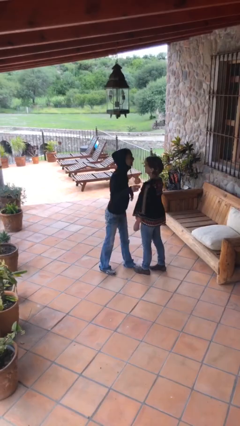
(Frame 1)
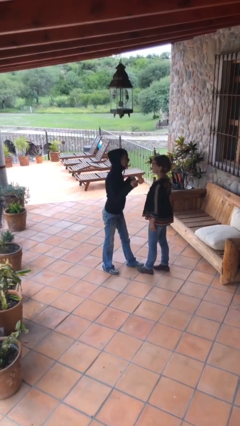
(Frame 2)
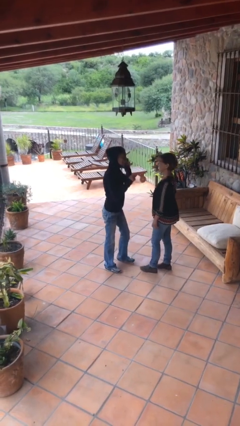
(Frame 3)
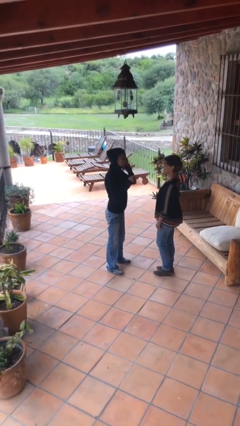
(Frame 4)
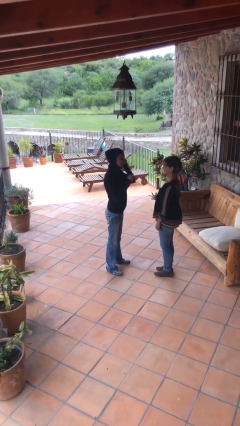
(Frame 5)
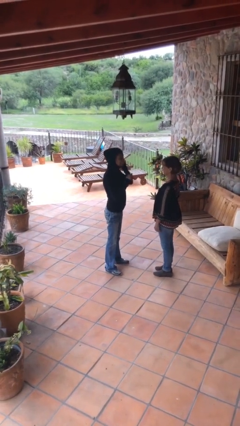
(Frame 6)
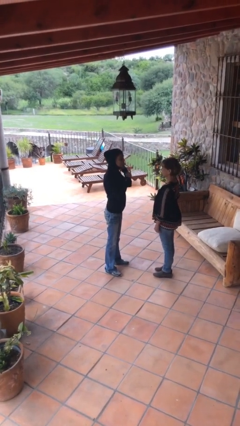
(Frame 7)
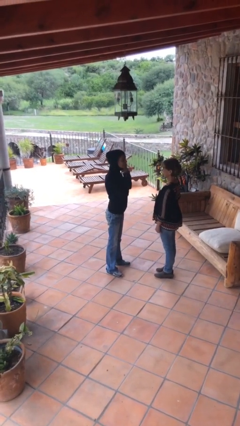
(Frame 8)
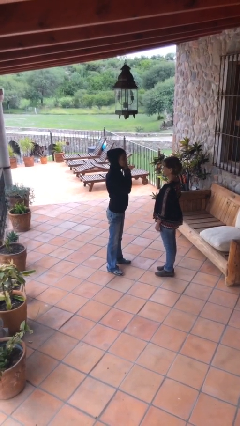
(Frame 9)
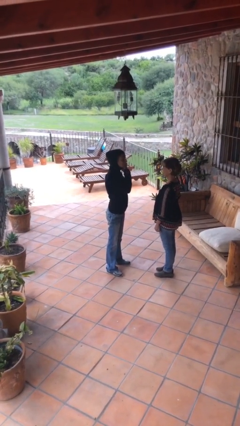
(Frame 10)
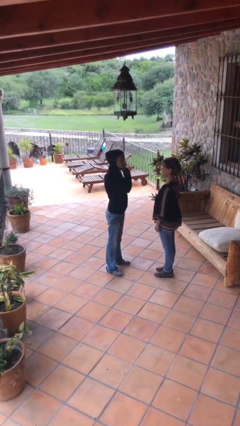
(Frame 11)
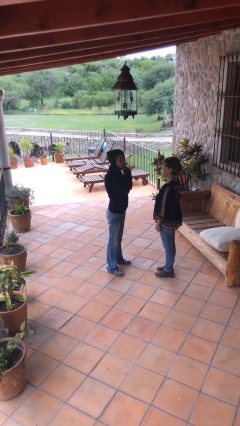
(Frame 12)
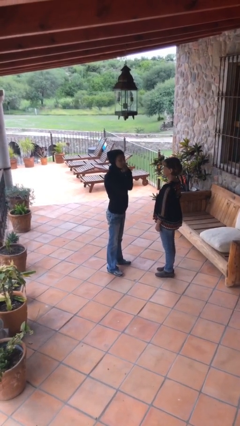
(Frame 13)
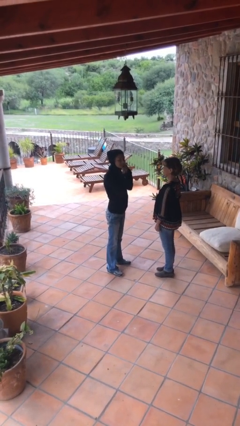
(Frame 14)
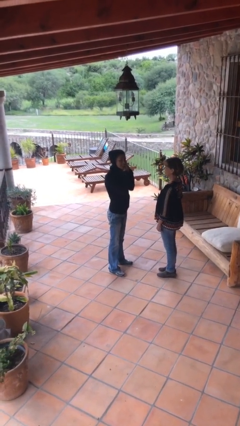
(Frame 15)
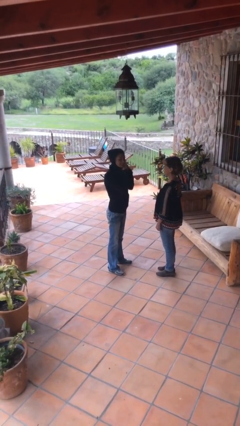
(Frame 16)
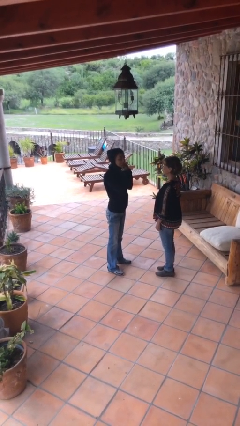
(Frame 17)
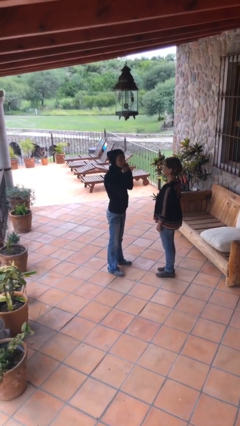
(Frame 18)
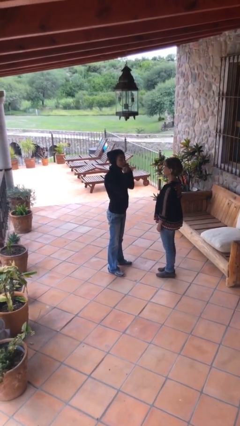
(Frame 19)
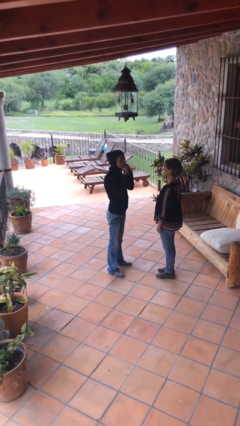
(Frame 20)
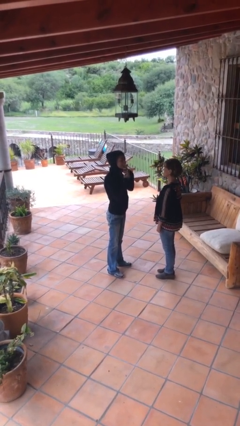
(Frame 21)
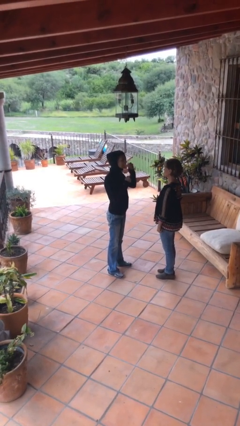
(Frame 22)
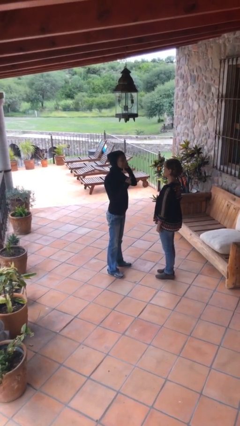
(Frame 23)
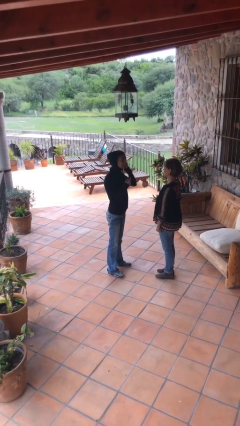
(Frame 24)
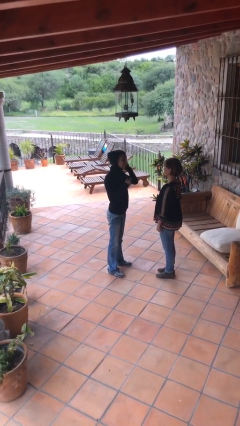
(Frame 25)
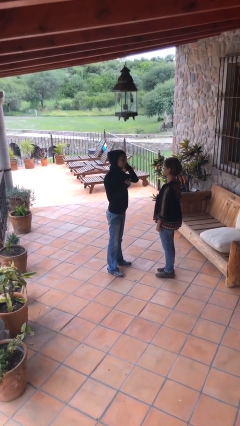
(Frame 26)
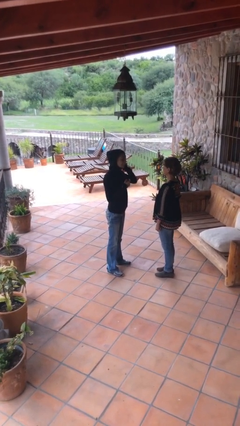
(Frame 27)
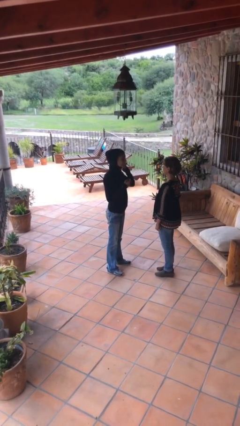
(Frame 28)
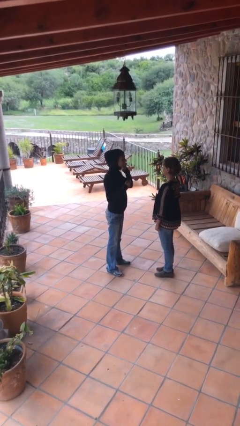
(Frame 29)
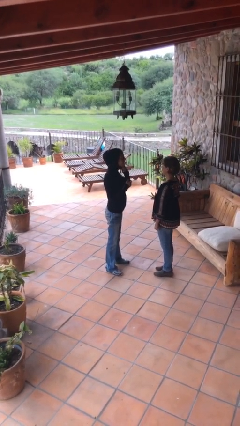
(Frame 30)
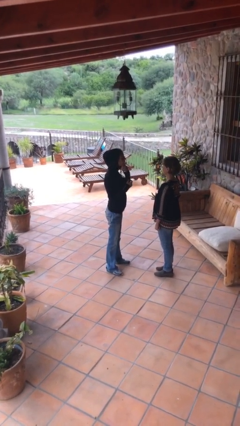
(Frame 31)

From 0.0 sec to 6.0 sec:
person talks to person

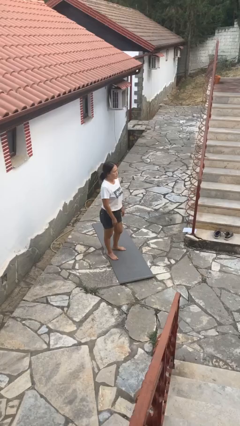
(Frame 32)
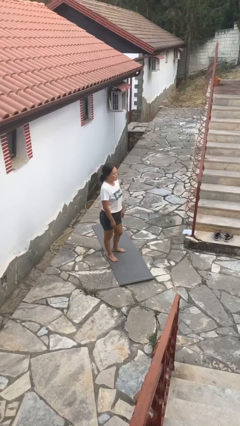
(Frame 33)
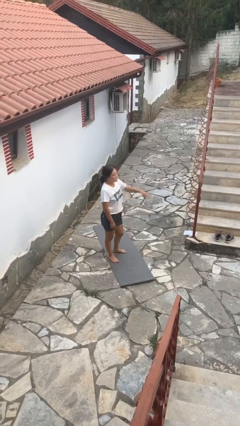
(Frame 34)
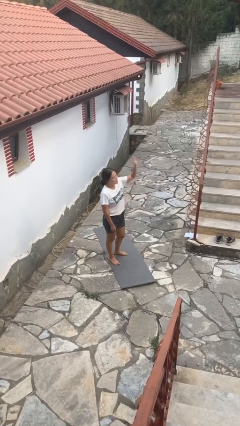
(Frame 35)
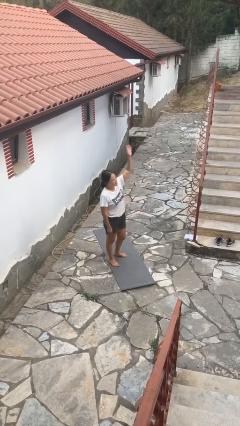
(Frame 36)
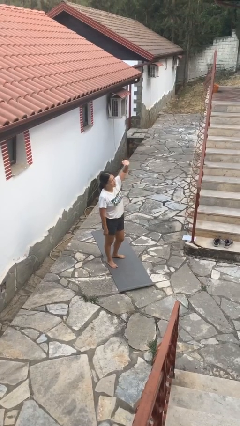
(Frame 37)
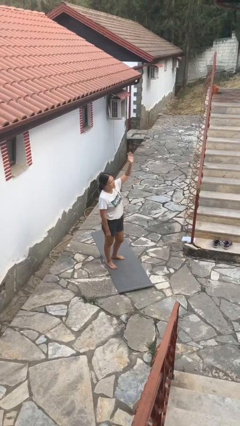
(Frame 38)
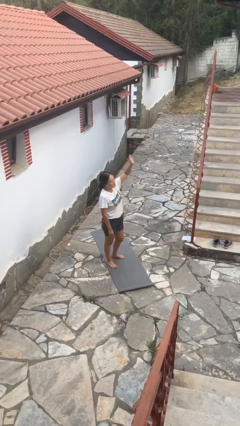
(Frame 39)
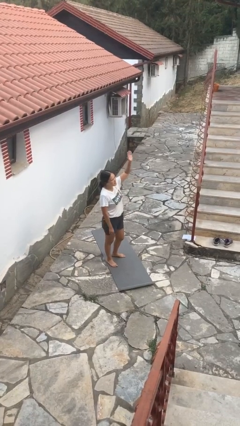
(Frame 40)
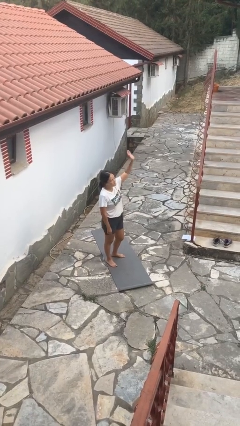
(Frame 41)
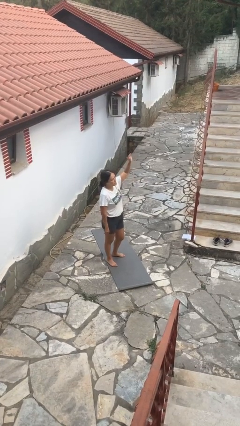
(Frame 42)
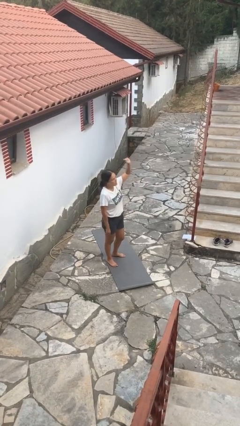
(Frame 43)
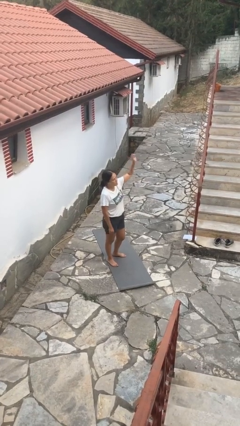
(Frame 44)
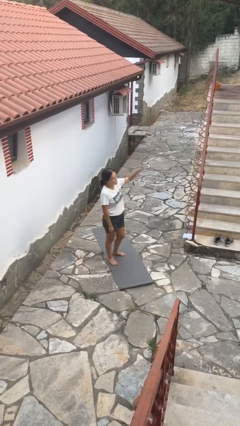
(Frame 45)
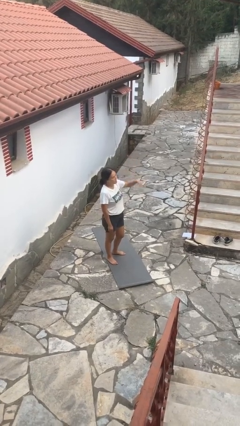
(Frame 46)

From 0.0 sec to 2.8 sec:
person gestures raise hand

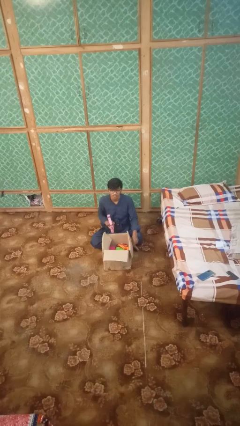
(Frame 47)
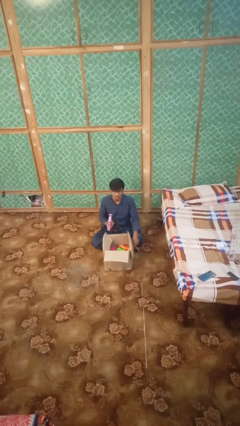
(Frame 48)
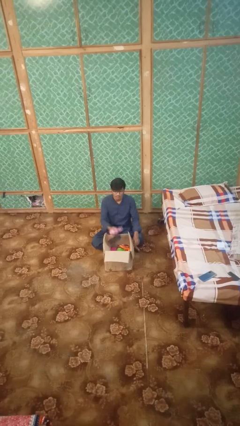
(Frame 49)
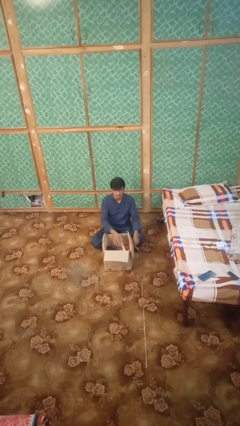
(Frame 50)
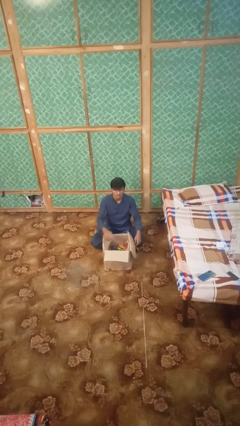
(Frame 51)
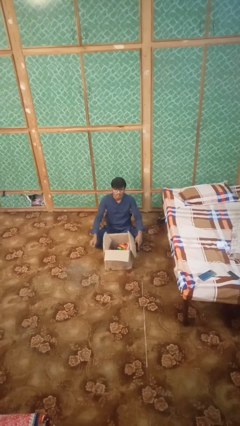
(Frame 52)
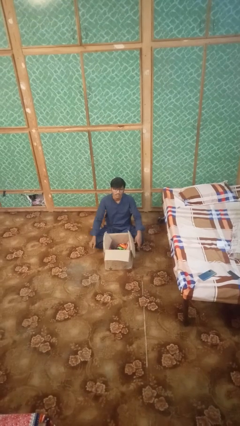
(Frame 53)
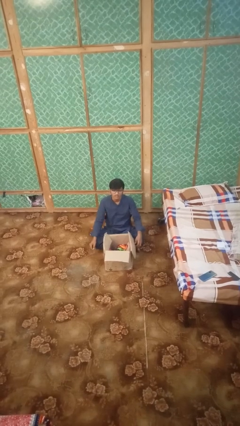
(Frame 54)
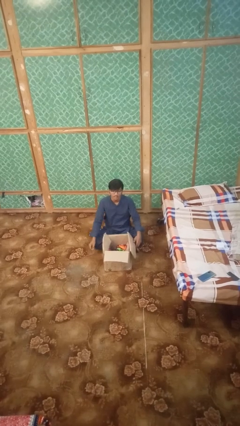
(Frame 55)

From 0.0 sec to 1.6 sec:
person puts object into box

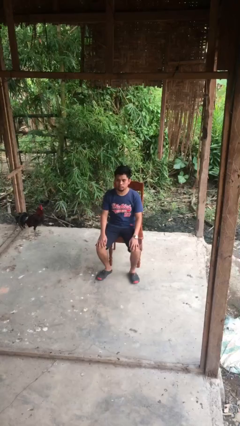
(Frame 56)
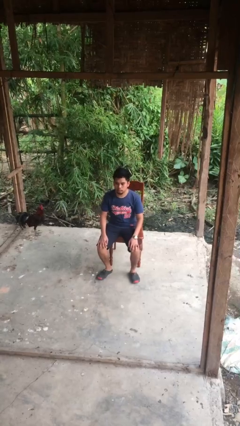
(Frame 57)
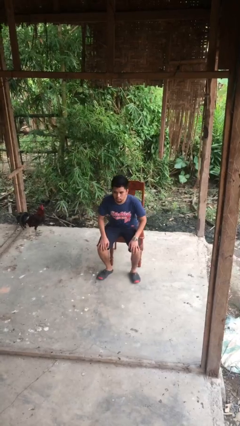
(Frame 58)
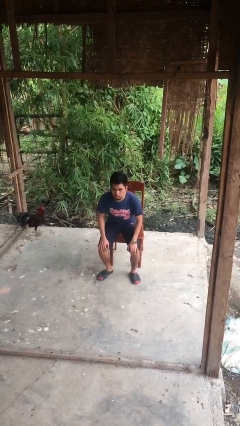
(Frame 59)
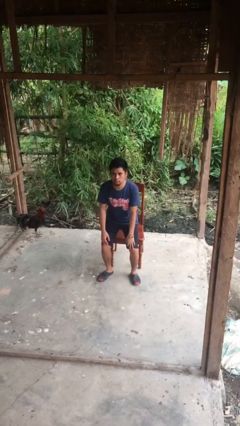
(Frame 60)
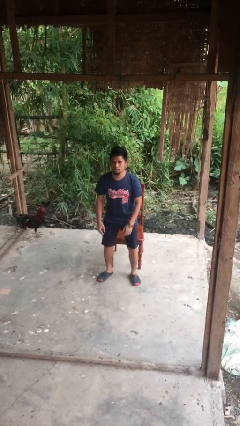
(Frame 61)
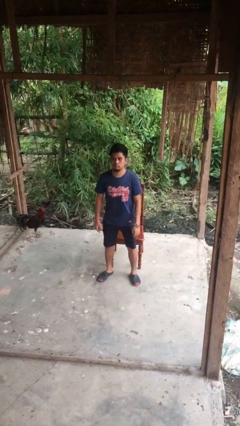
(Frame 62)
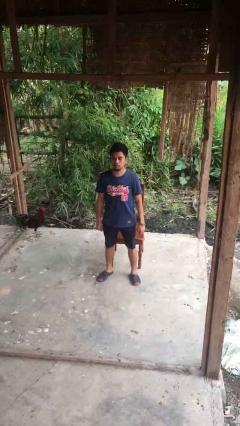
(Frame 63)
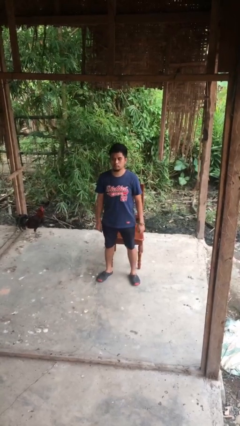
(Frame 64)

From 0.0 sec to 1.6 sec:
person stands up

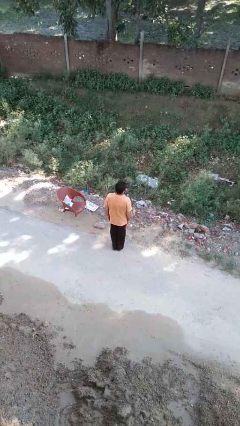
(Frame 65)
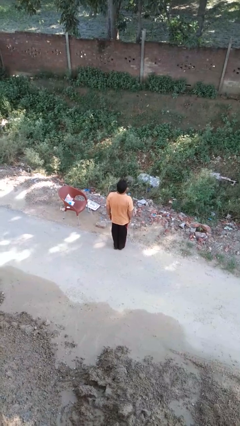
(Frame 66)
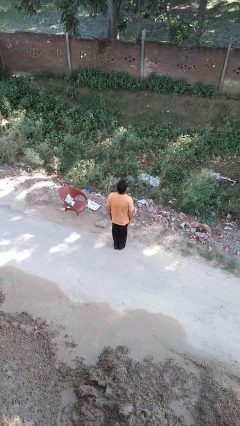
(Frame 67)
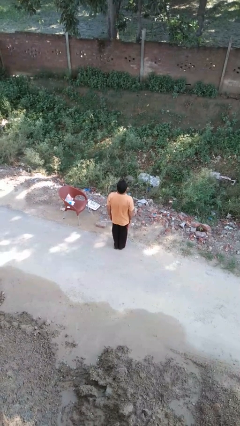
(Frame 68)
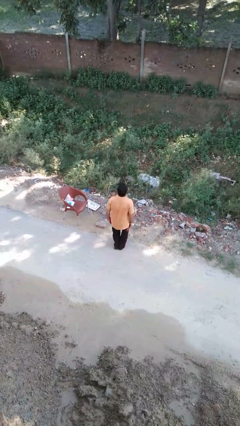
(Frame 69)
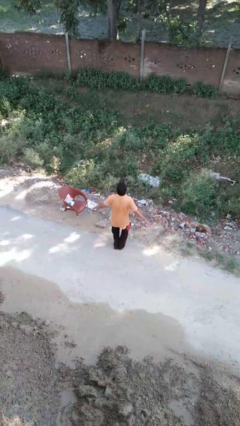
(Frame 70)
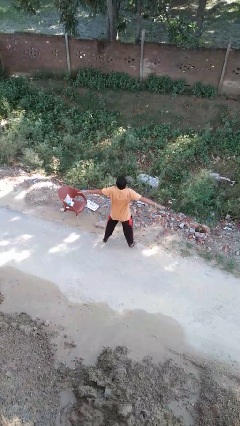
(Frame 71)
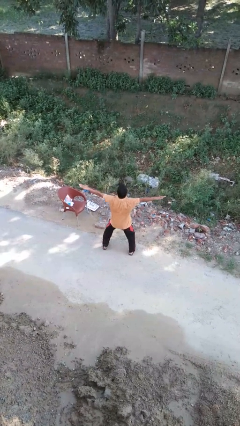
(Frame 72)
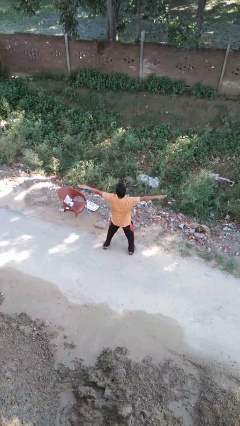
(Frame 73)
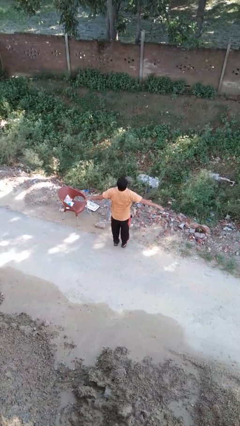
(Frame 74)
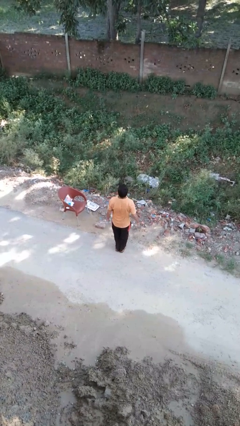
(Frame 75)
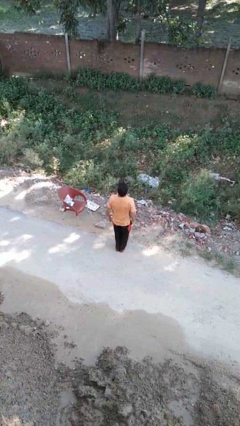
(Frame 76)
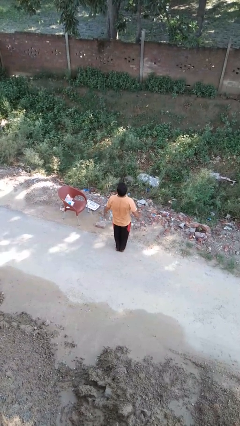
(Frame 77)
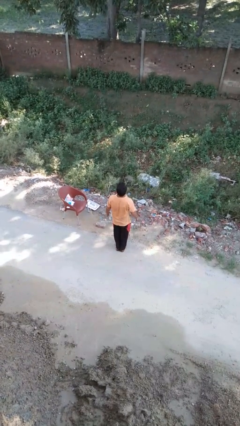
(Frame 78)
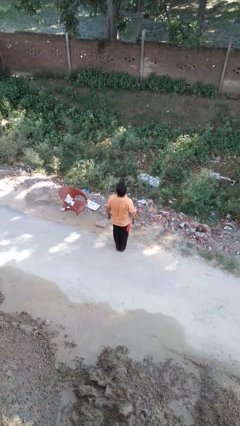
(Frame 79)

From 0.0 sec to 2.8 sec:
person exercises with jumping jacks

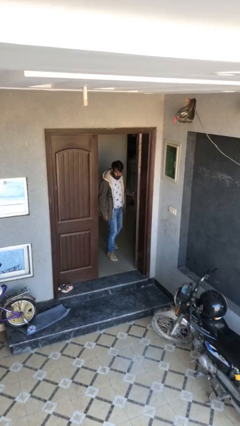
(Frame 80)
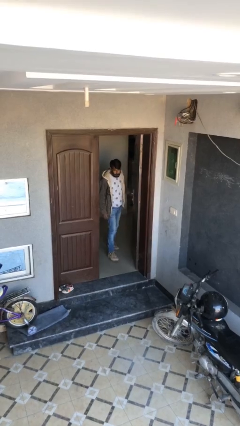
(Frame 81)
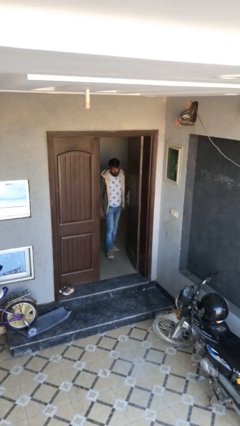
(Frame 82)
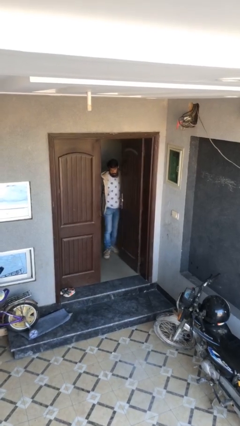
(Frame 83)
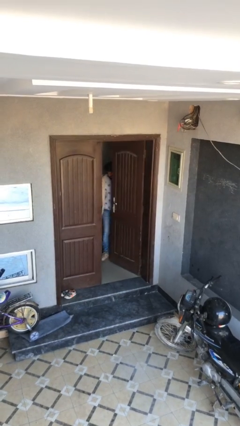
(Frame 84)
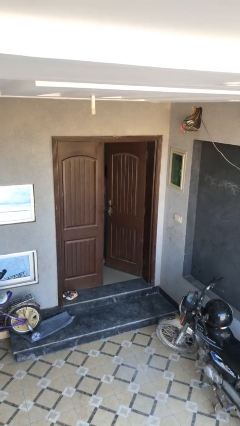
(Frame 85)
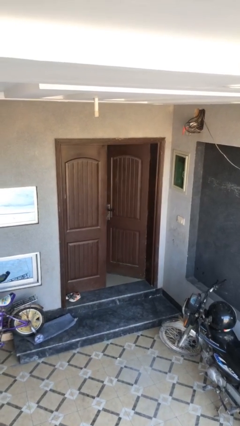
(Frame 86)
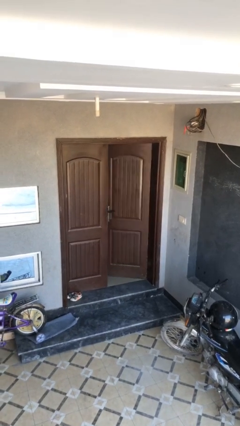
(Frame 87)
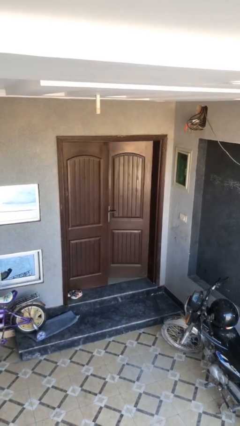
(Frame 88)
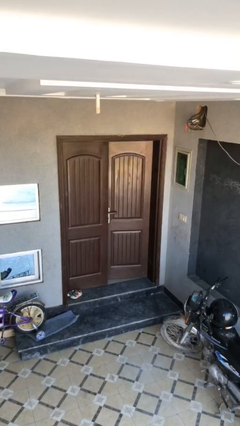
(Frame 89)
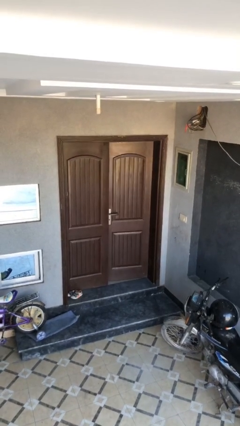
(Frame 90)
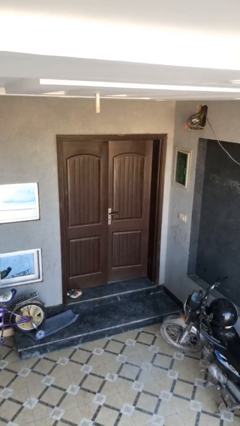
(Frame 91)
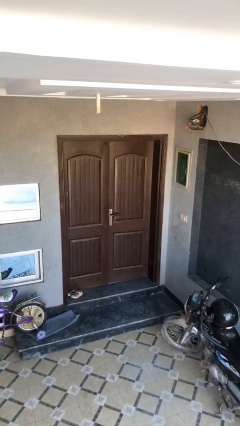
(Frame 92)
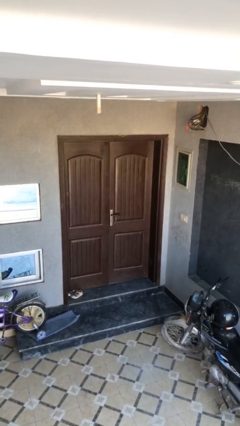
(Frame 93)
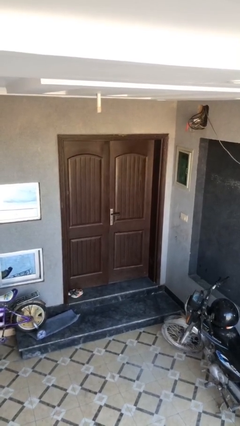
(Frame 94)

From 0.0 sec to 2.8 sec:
person closes facility door

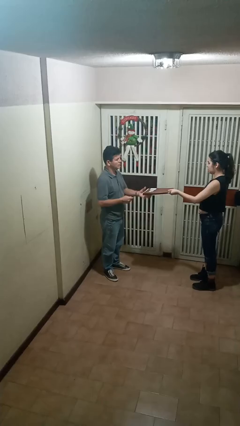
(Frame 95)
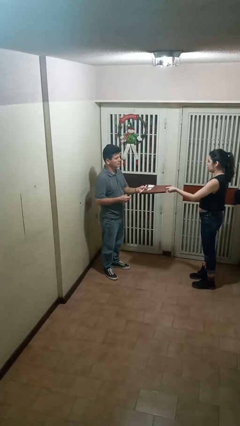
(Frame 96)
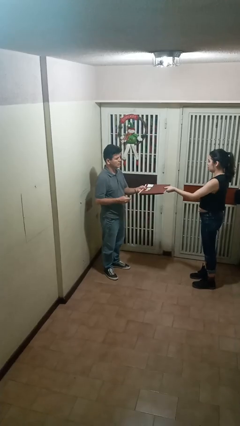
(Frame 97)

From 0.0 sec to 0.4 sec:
person transfers object to person
